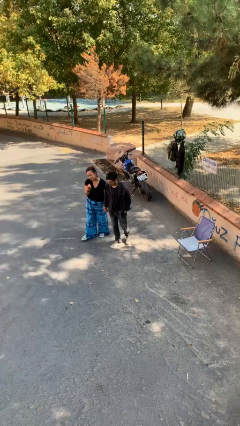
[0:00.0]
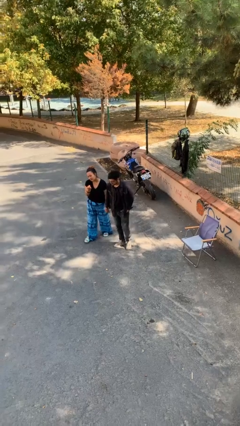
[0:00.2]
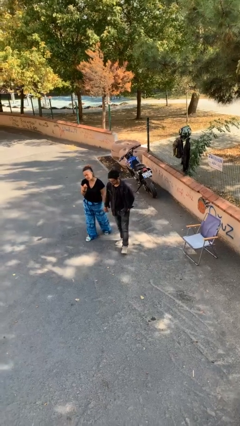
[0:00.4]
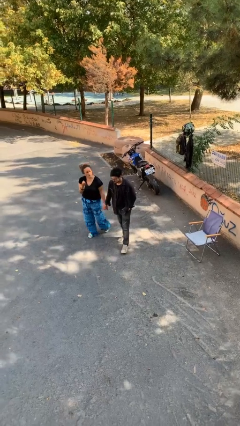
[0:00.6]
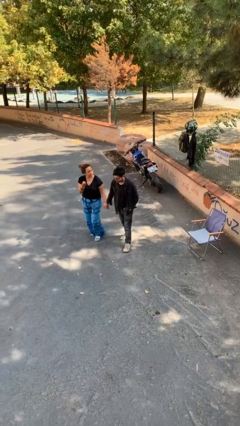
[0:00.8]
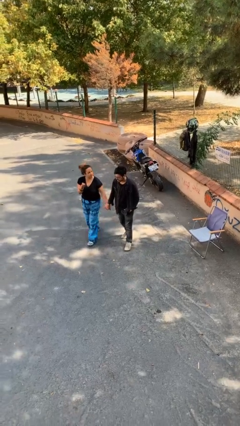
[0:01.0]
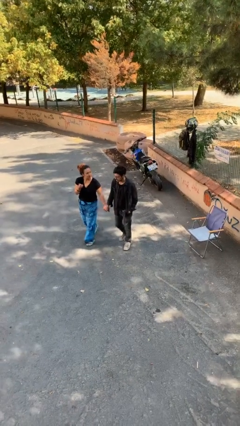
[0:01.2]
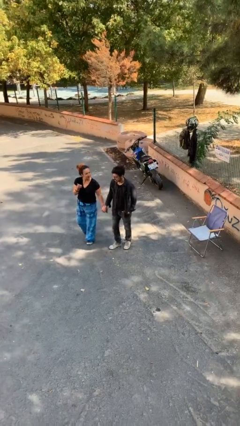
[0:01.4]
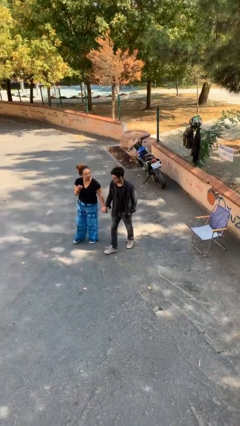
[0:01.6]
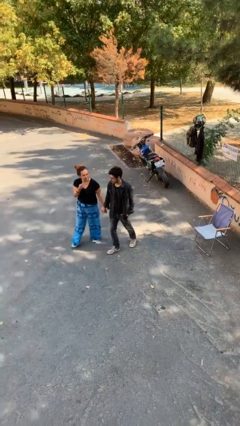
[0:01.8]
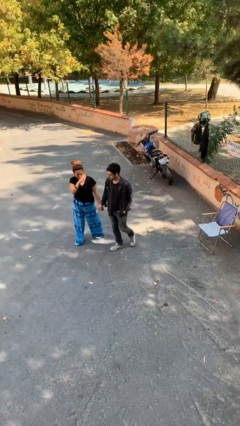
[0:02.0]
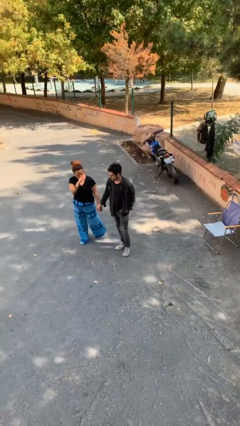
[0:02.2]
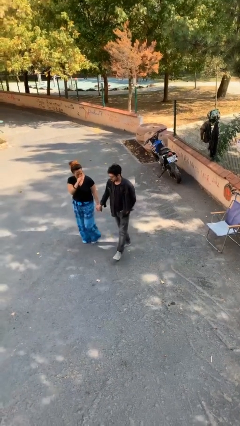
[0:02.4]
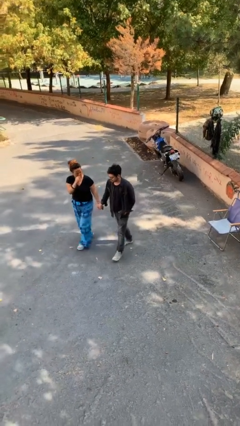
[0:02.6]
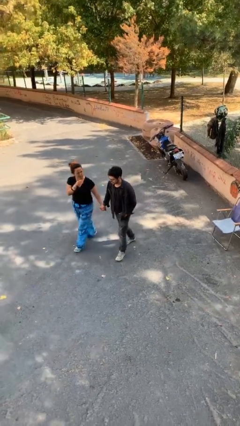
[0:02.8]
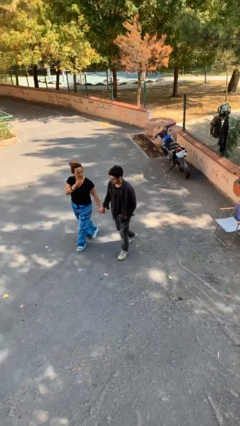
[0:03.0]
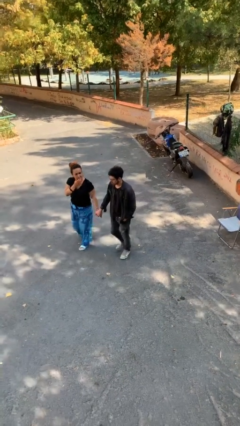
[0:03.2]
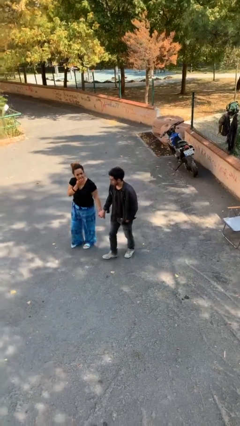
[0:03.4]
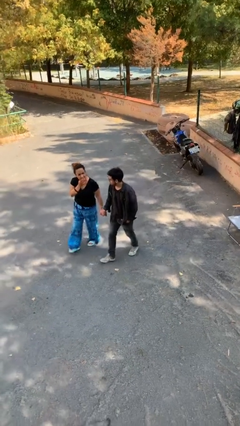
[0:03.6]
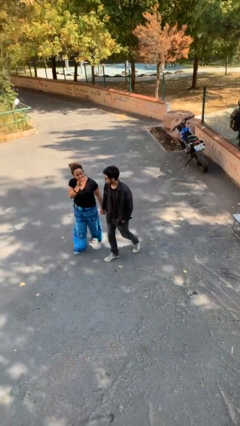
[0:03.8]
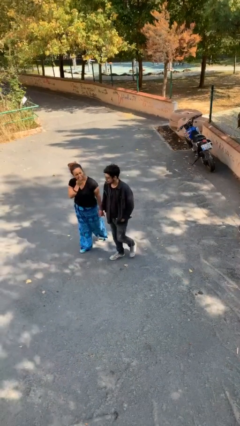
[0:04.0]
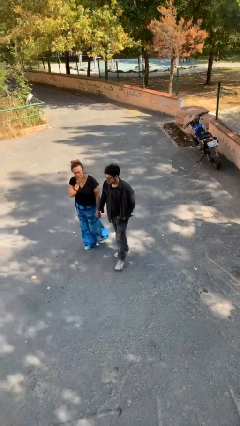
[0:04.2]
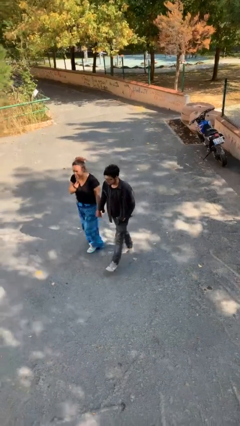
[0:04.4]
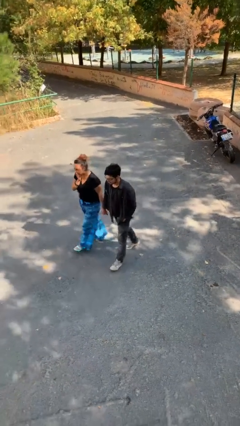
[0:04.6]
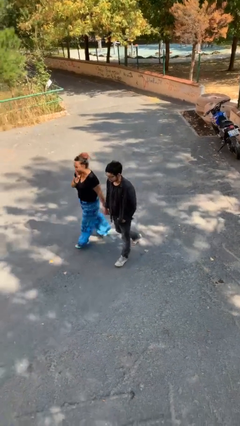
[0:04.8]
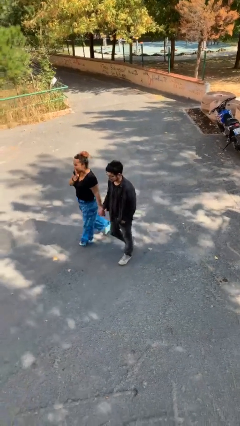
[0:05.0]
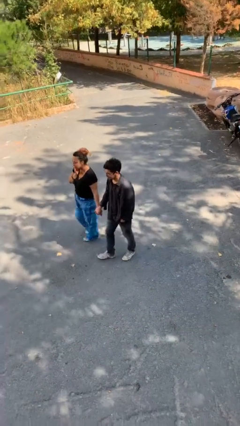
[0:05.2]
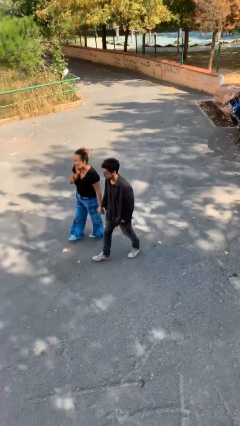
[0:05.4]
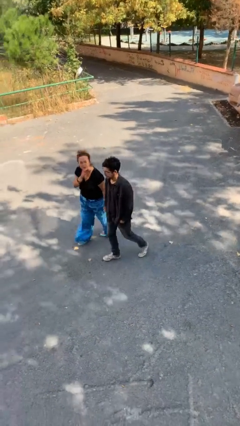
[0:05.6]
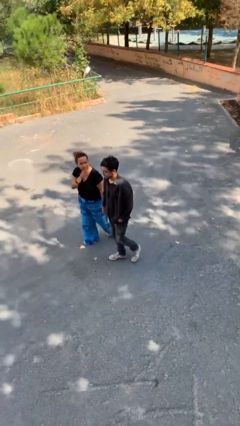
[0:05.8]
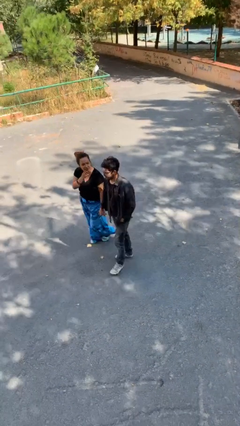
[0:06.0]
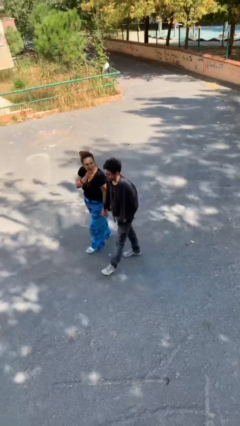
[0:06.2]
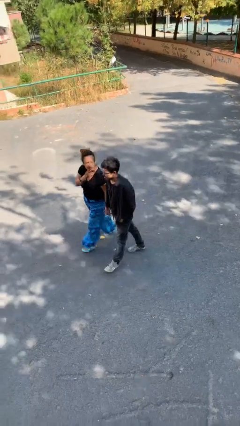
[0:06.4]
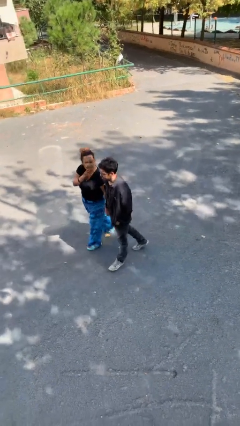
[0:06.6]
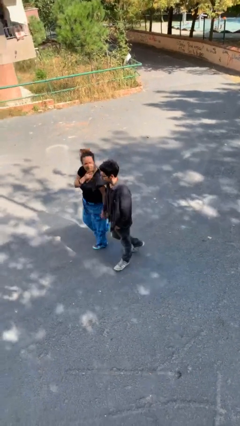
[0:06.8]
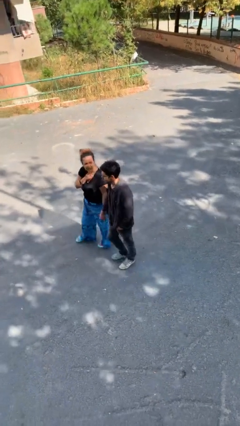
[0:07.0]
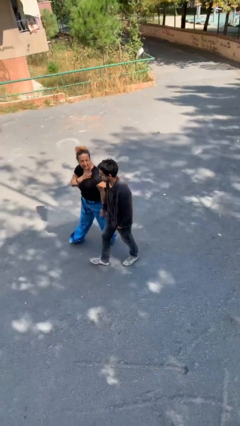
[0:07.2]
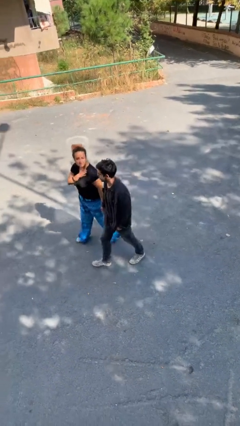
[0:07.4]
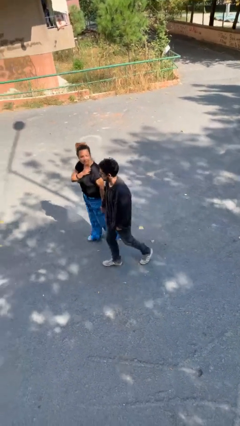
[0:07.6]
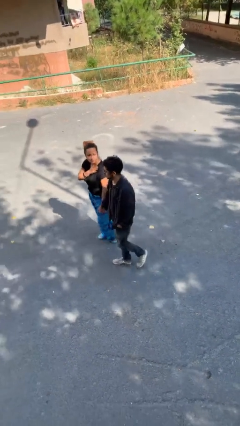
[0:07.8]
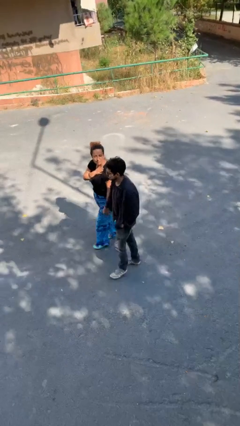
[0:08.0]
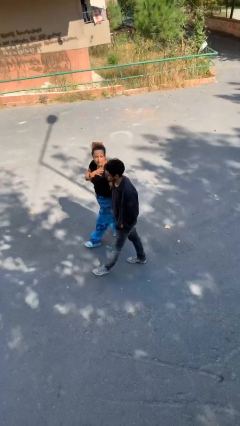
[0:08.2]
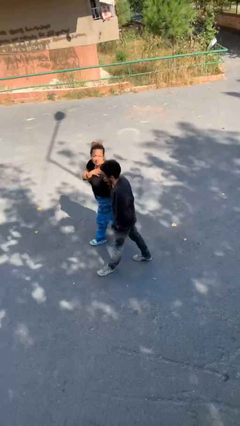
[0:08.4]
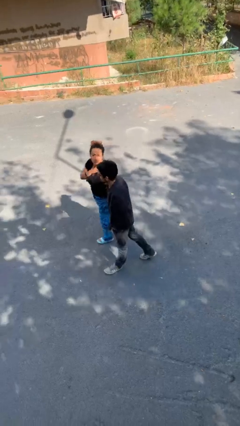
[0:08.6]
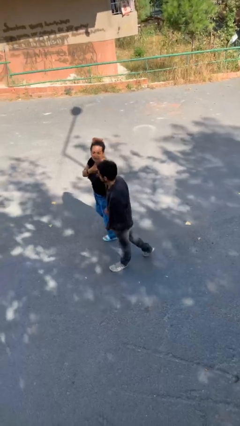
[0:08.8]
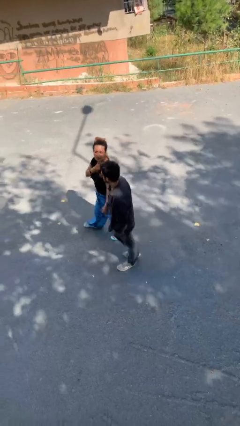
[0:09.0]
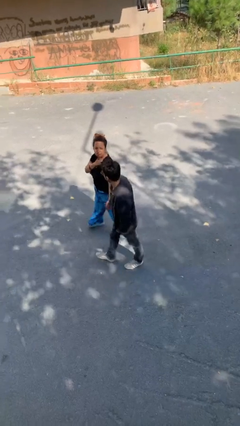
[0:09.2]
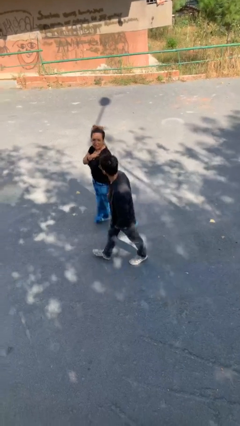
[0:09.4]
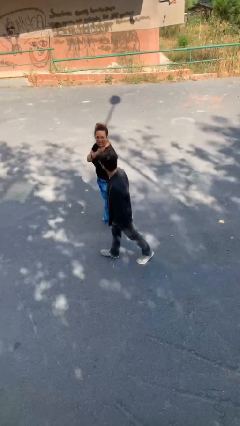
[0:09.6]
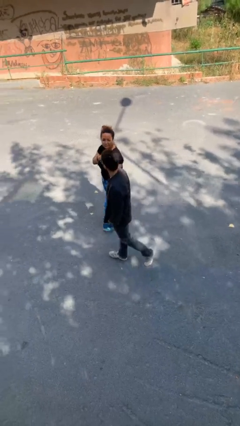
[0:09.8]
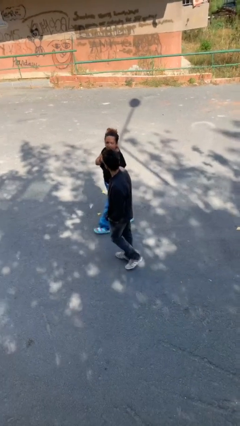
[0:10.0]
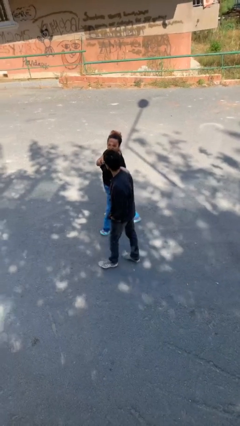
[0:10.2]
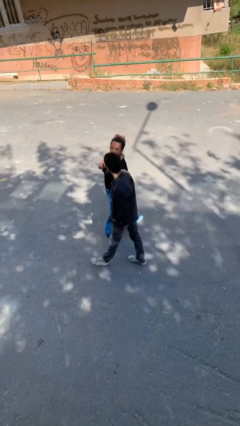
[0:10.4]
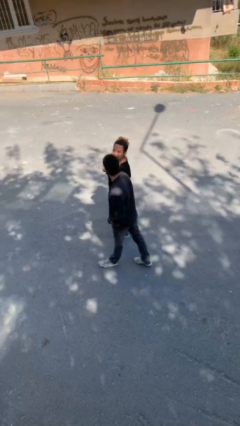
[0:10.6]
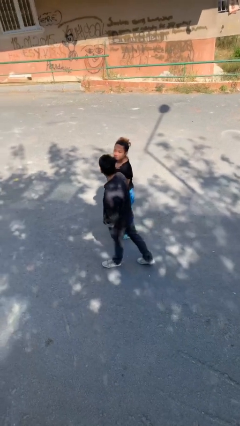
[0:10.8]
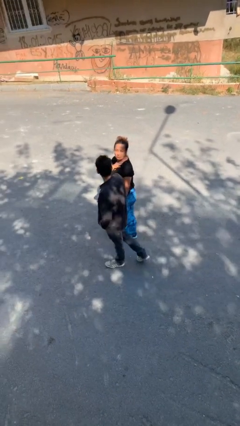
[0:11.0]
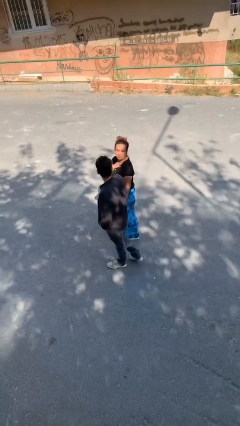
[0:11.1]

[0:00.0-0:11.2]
person holds hand

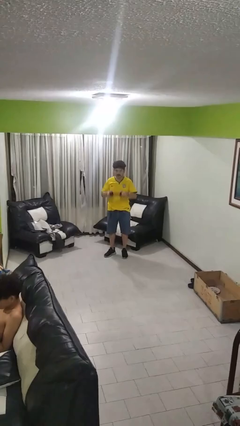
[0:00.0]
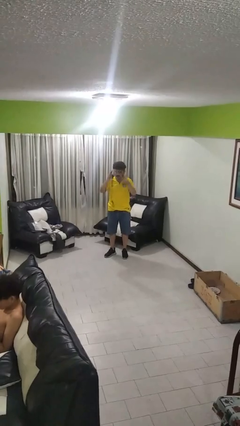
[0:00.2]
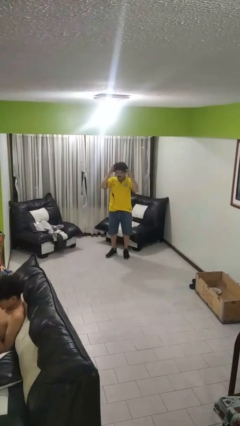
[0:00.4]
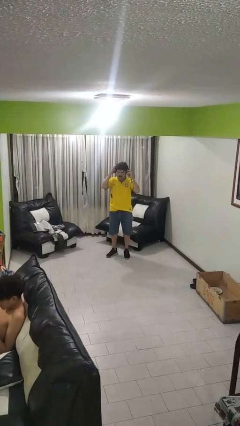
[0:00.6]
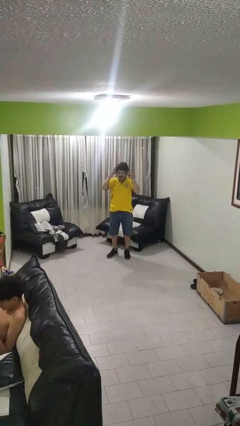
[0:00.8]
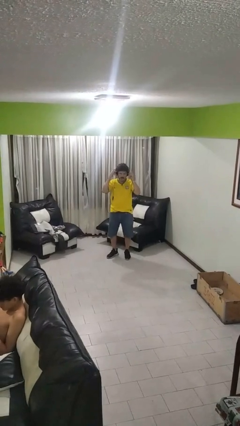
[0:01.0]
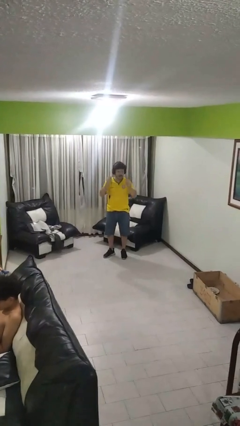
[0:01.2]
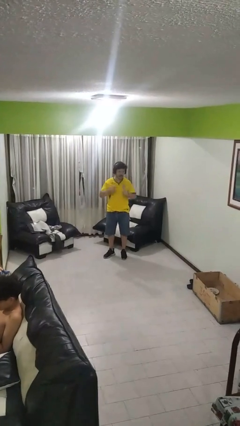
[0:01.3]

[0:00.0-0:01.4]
person puts on headphones

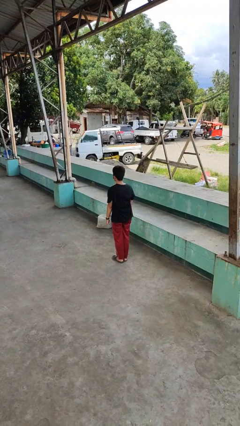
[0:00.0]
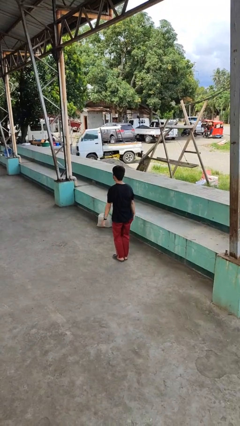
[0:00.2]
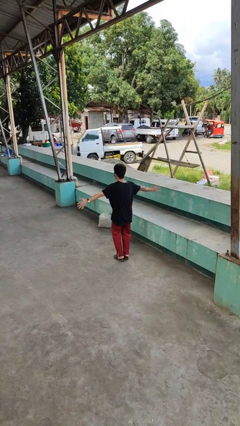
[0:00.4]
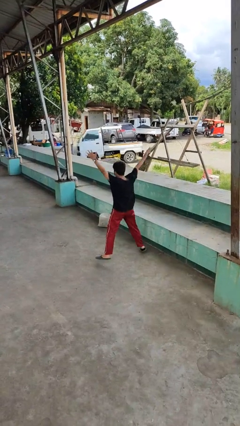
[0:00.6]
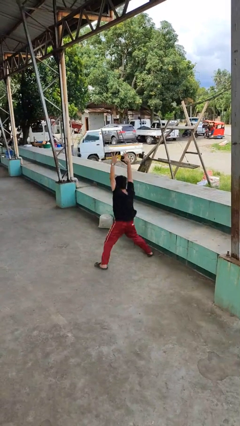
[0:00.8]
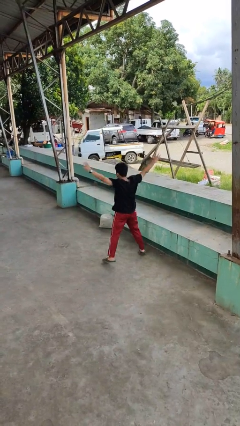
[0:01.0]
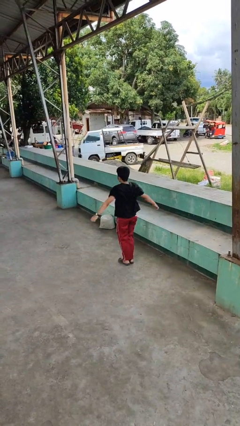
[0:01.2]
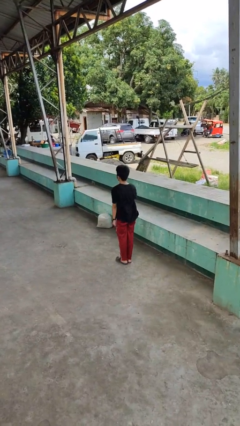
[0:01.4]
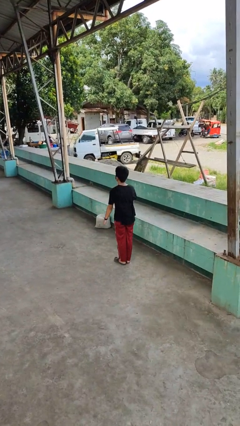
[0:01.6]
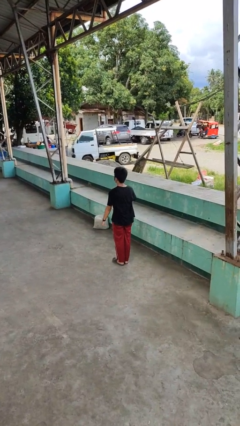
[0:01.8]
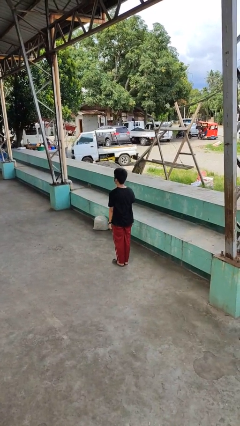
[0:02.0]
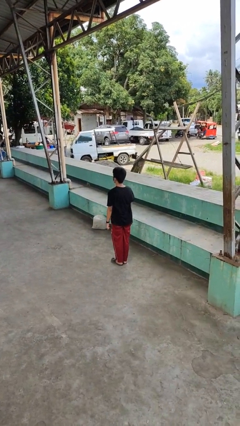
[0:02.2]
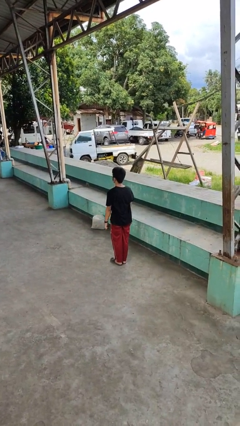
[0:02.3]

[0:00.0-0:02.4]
person exercises with jumping jacks

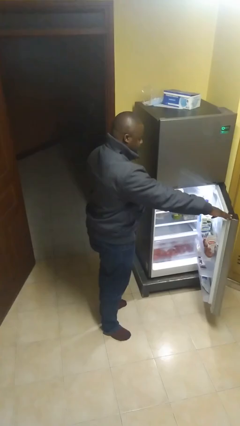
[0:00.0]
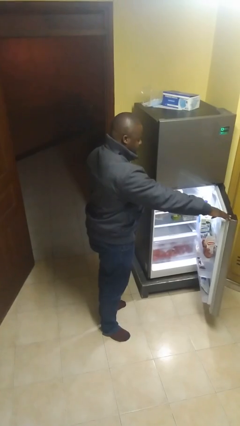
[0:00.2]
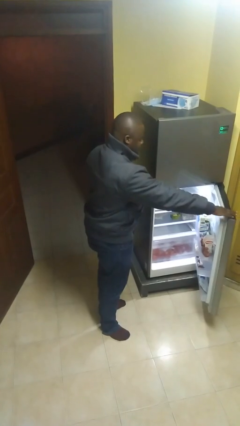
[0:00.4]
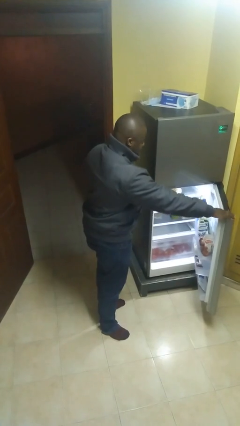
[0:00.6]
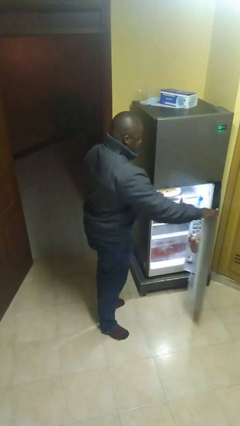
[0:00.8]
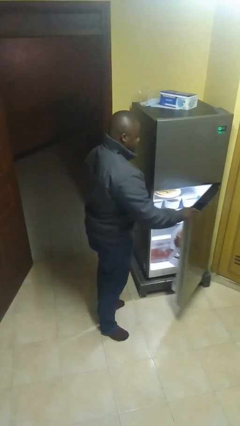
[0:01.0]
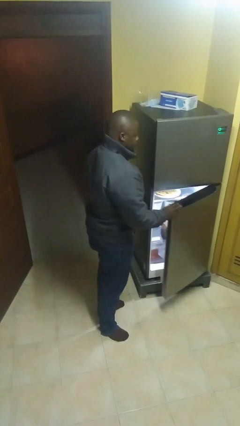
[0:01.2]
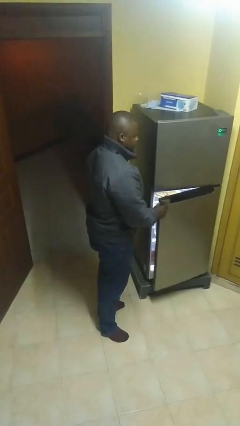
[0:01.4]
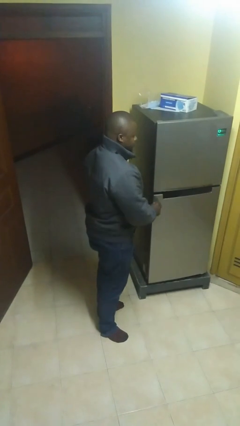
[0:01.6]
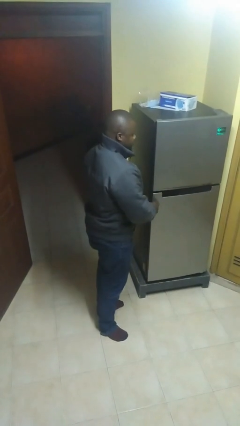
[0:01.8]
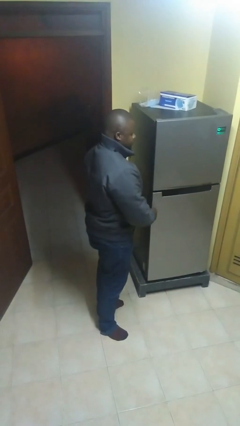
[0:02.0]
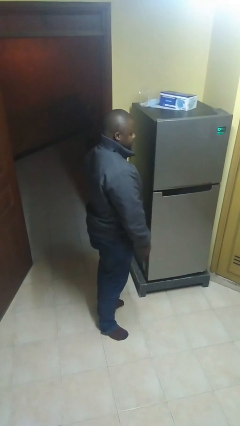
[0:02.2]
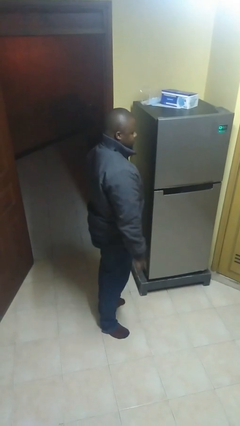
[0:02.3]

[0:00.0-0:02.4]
person closes refrigerator
